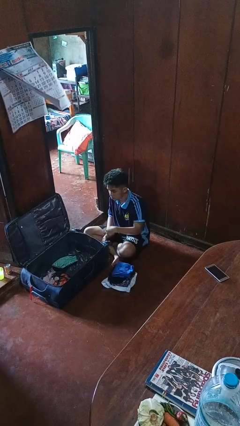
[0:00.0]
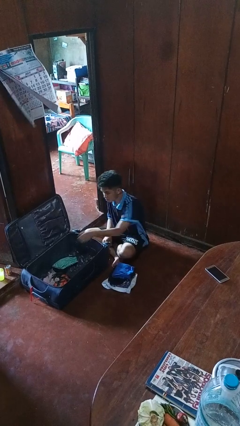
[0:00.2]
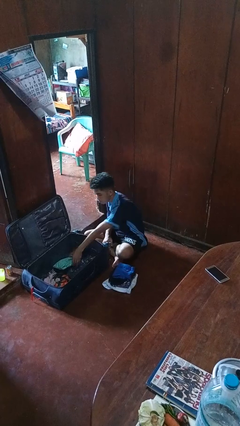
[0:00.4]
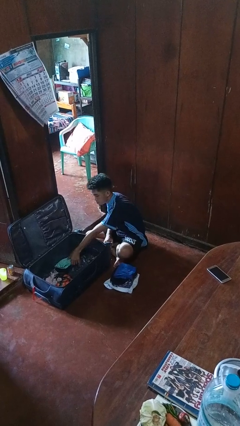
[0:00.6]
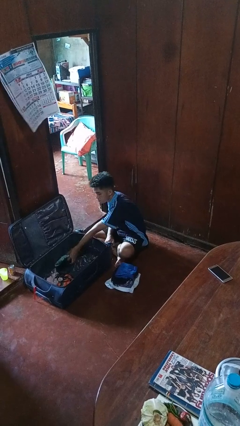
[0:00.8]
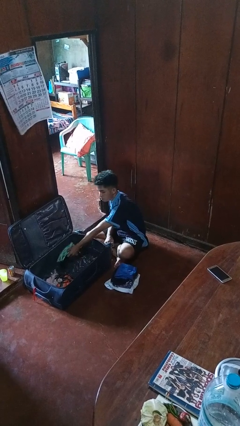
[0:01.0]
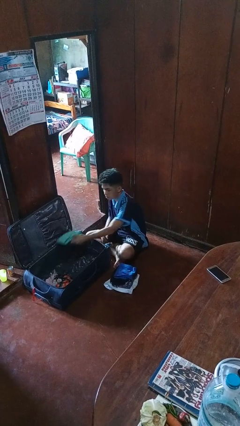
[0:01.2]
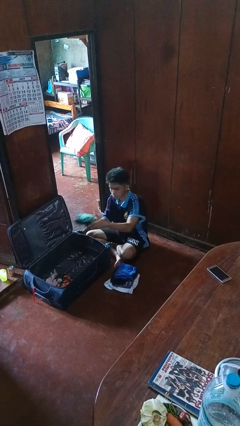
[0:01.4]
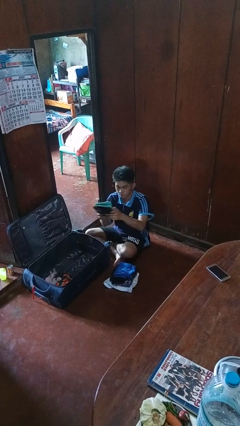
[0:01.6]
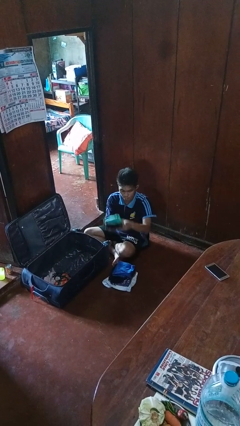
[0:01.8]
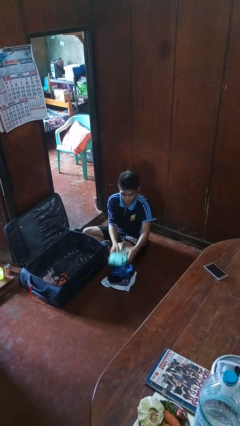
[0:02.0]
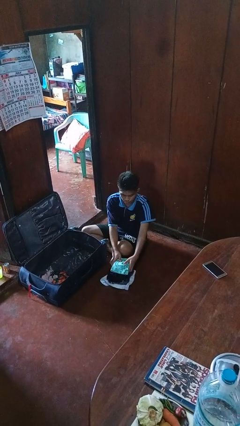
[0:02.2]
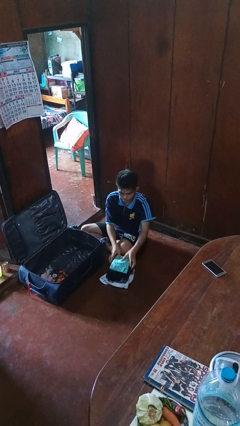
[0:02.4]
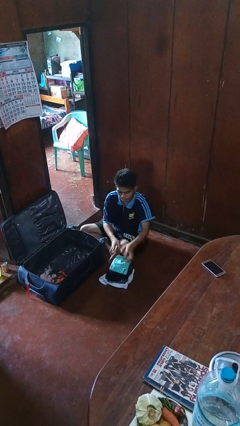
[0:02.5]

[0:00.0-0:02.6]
person unloads clothes from suitcase

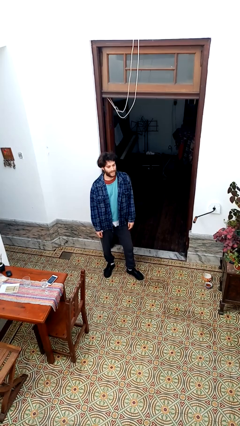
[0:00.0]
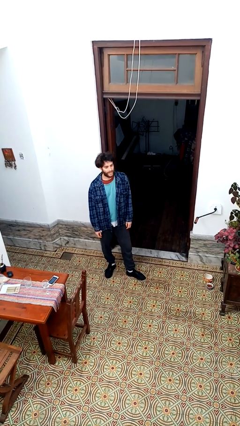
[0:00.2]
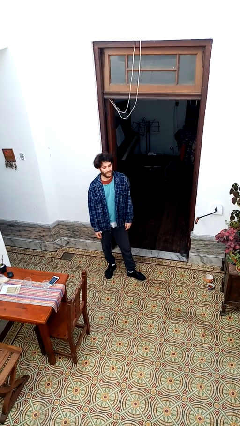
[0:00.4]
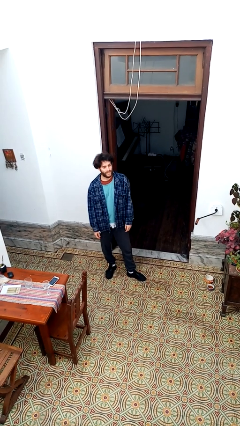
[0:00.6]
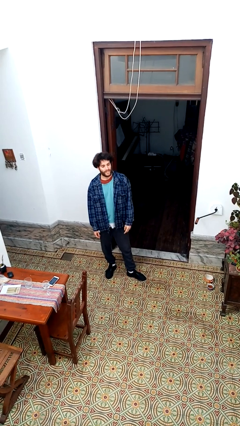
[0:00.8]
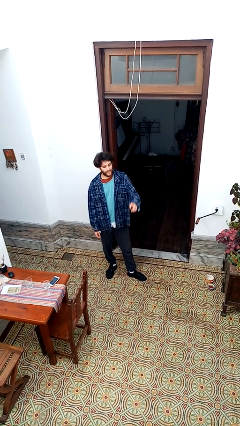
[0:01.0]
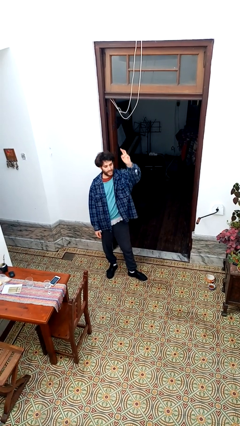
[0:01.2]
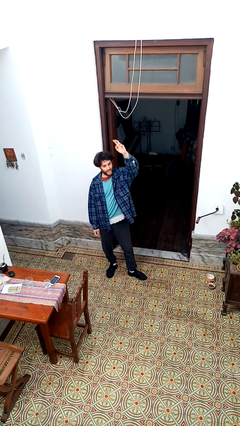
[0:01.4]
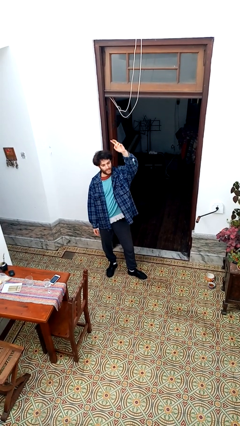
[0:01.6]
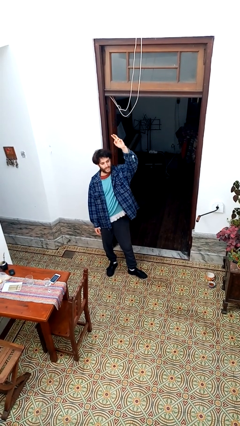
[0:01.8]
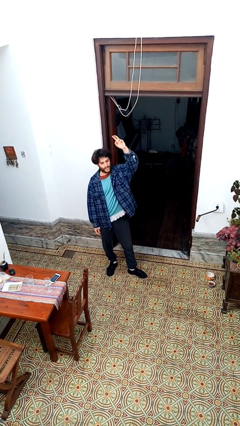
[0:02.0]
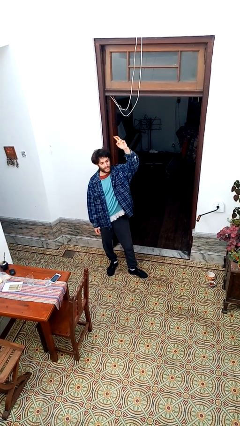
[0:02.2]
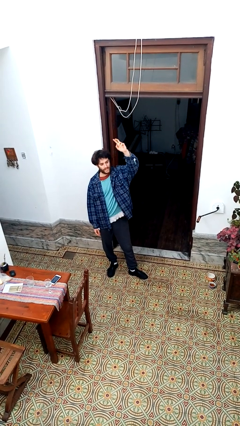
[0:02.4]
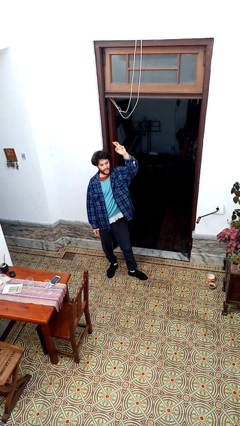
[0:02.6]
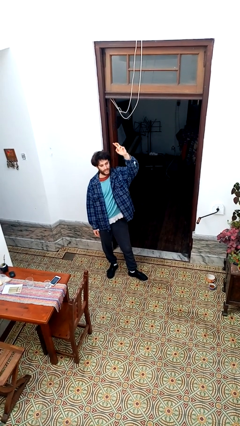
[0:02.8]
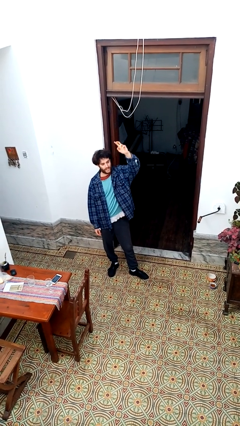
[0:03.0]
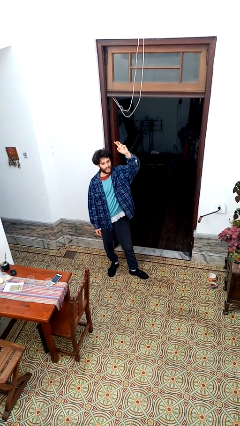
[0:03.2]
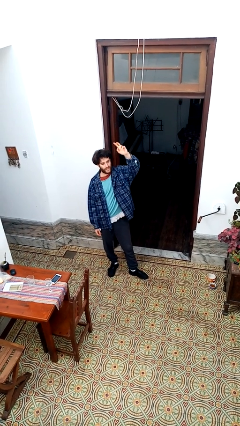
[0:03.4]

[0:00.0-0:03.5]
person gestures raise hand

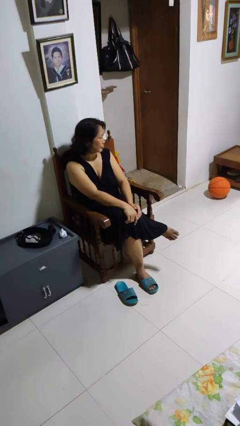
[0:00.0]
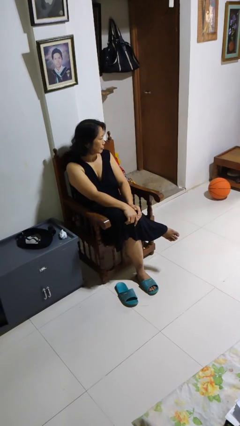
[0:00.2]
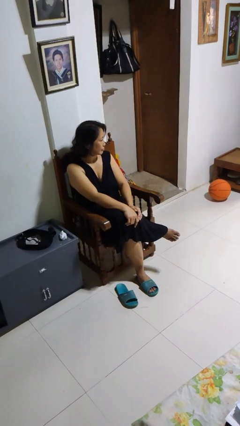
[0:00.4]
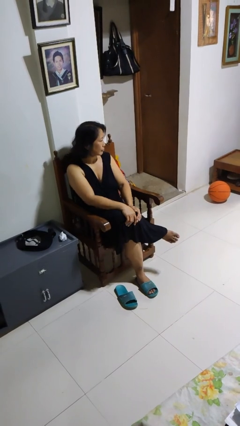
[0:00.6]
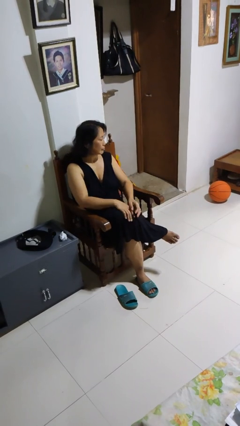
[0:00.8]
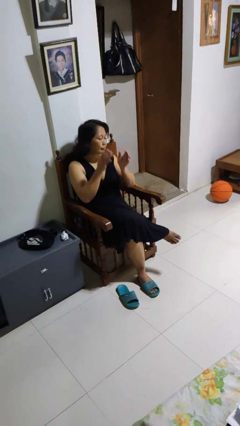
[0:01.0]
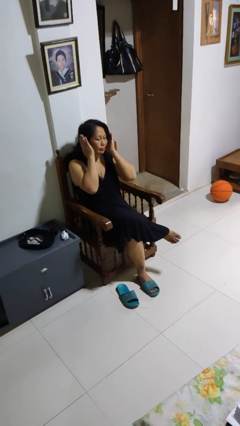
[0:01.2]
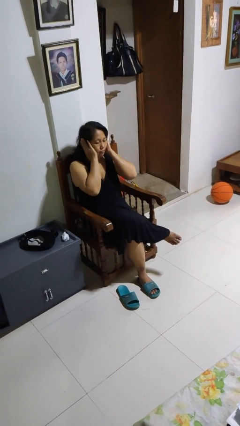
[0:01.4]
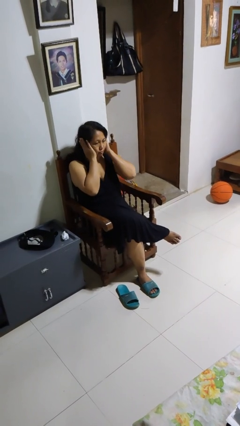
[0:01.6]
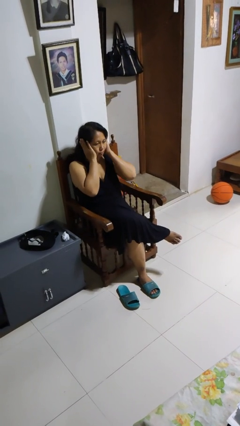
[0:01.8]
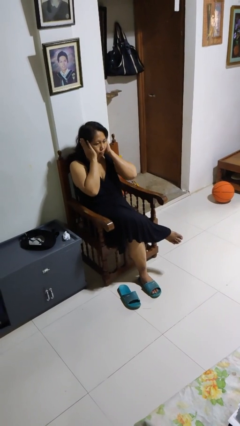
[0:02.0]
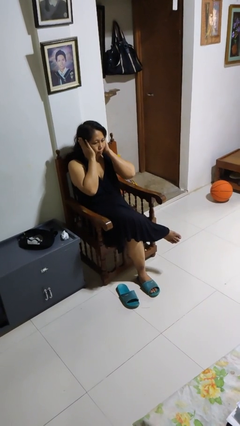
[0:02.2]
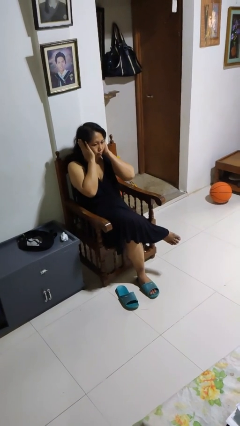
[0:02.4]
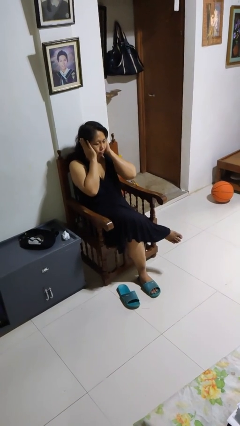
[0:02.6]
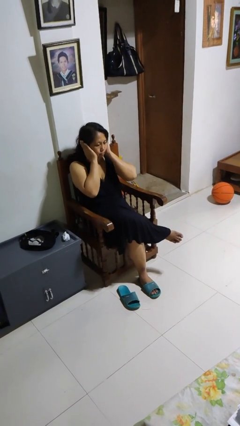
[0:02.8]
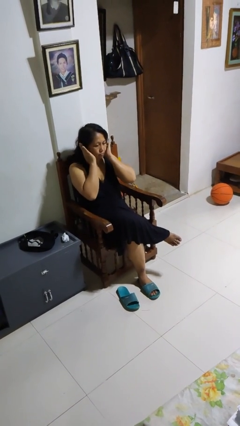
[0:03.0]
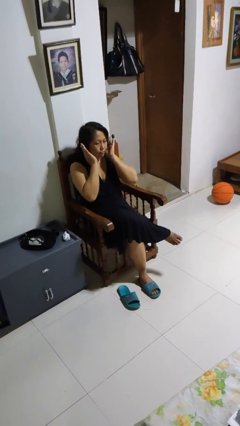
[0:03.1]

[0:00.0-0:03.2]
person puts fingers in ear

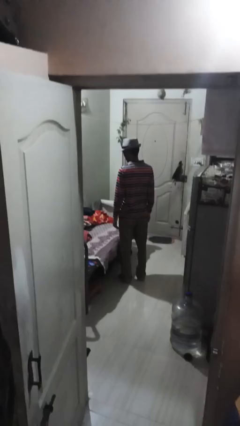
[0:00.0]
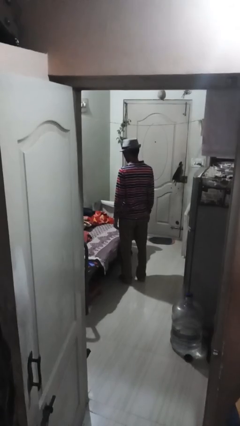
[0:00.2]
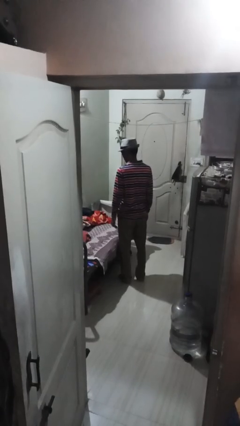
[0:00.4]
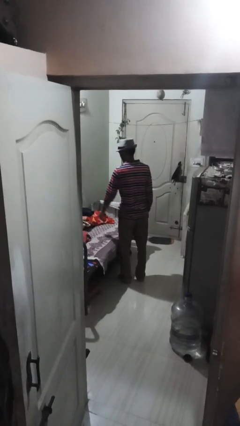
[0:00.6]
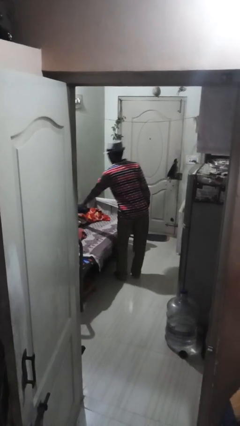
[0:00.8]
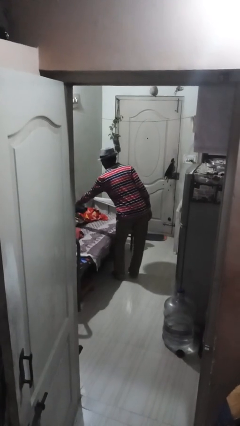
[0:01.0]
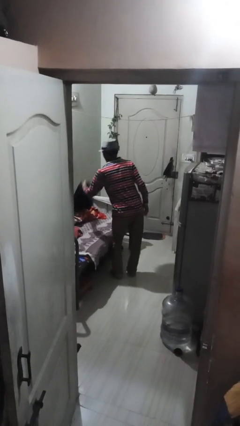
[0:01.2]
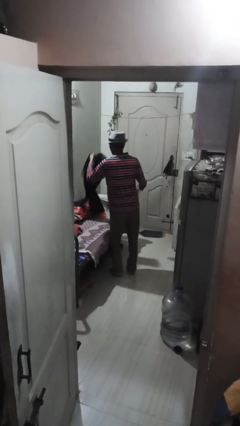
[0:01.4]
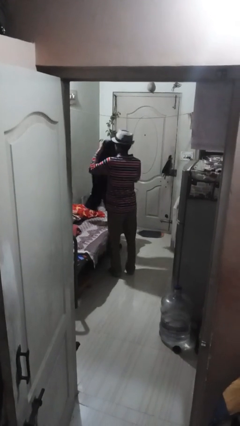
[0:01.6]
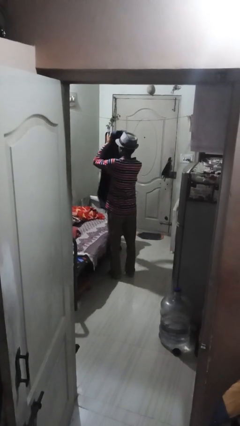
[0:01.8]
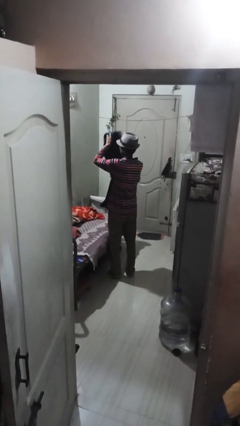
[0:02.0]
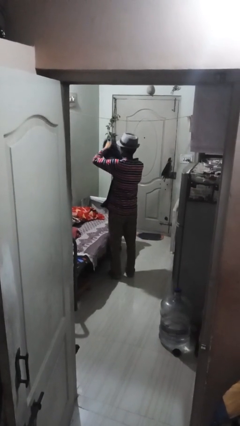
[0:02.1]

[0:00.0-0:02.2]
person folds pants

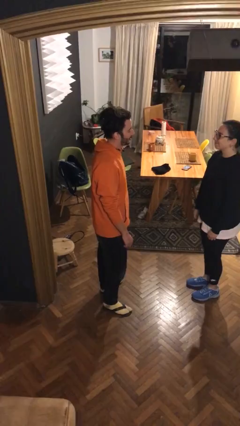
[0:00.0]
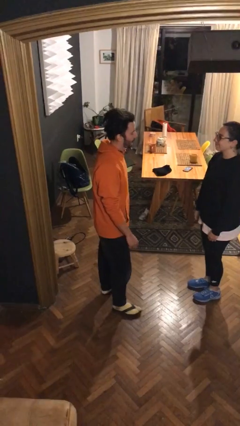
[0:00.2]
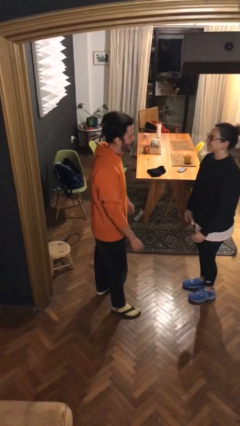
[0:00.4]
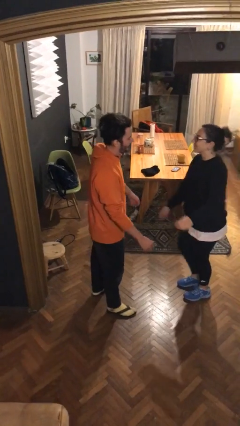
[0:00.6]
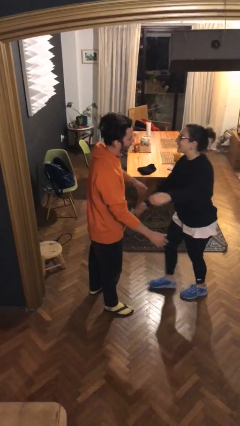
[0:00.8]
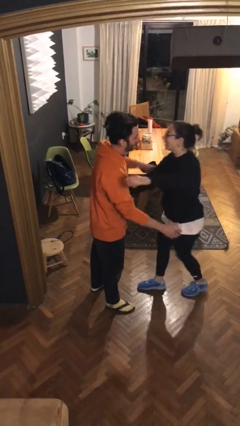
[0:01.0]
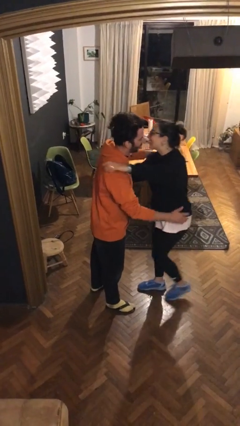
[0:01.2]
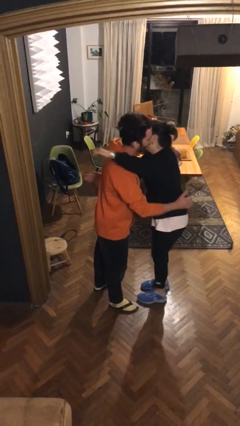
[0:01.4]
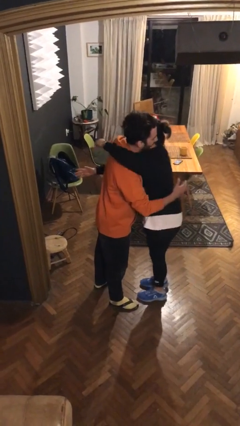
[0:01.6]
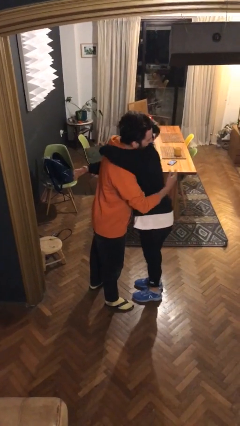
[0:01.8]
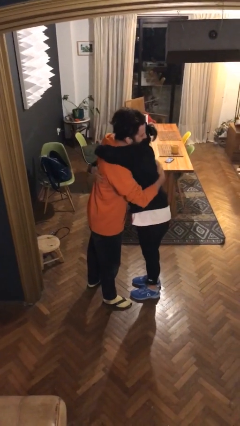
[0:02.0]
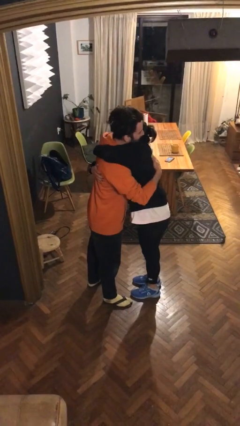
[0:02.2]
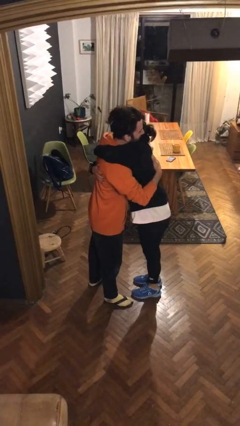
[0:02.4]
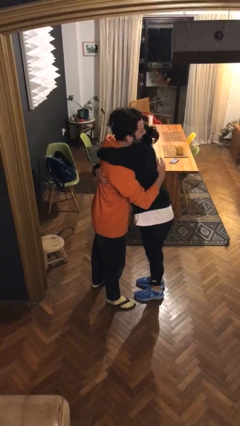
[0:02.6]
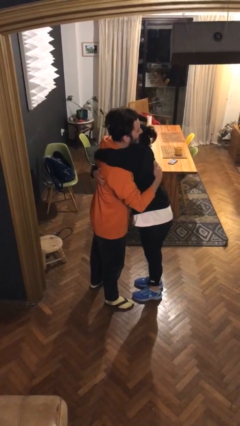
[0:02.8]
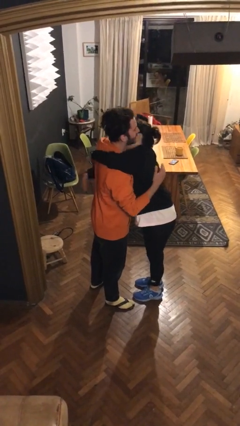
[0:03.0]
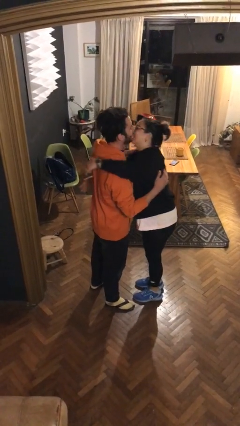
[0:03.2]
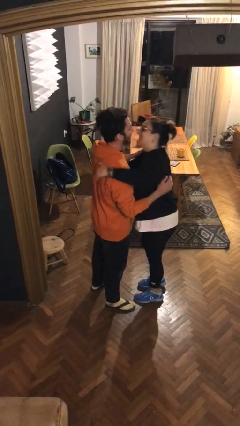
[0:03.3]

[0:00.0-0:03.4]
person embraces person

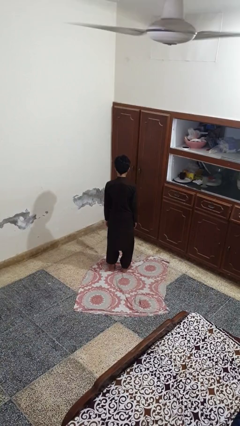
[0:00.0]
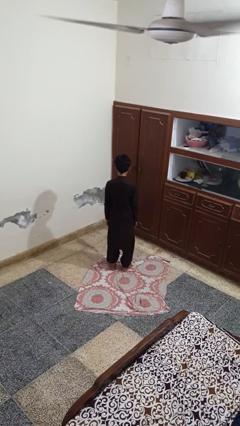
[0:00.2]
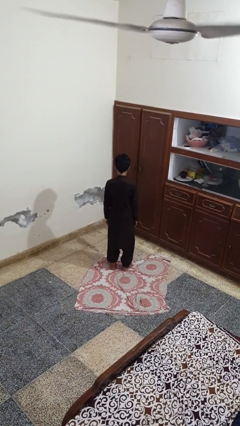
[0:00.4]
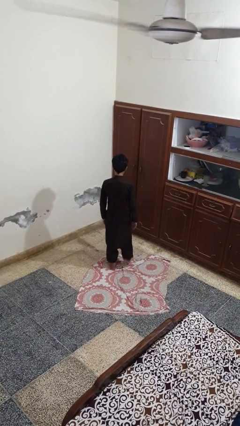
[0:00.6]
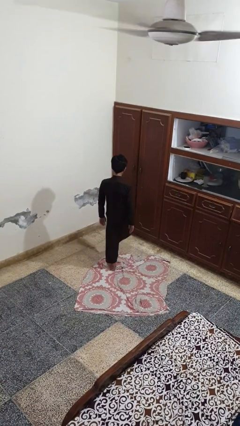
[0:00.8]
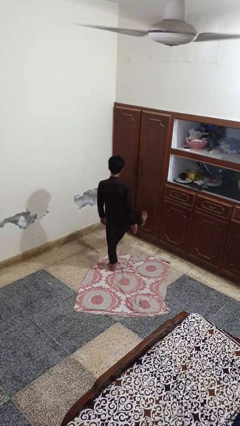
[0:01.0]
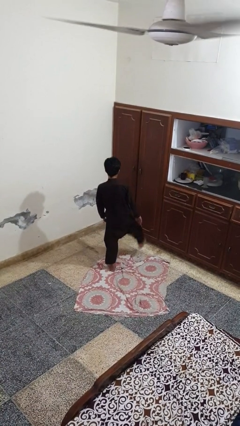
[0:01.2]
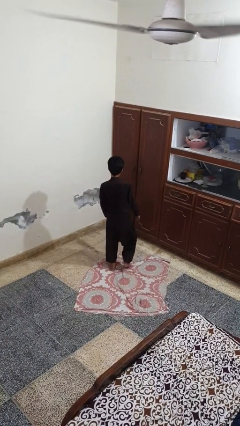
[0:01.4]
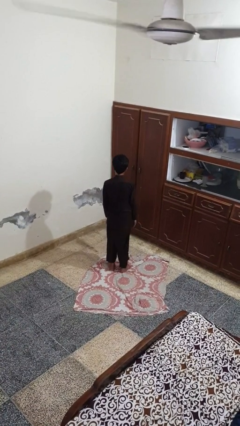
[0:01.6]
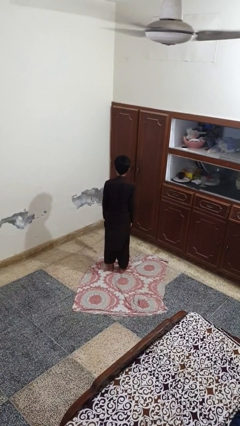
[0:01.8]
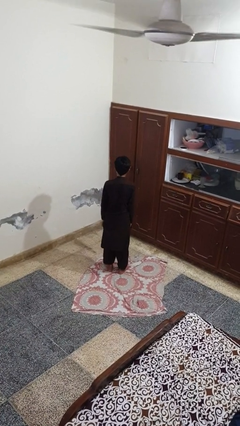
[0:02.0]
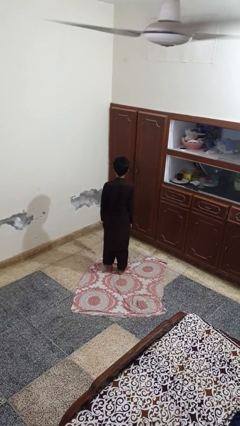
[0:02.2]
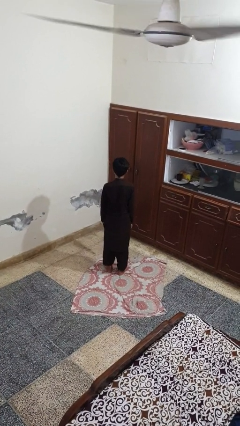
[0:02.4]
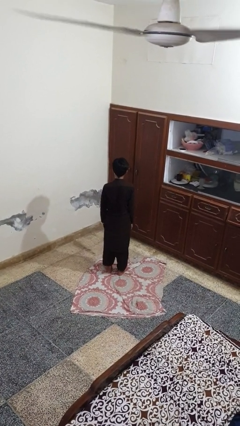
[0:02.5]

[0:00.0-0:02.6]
person karate kicks

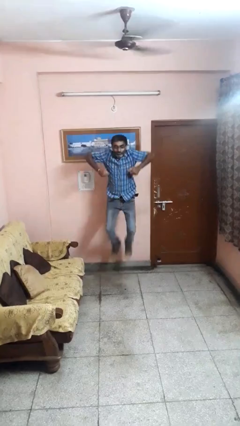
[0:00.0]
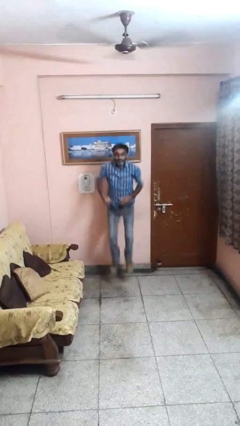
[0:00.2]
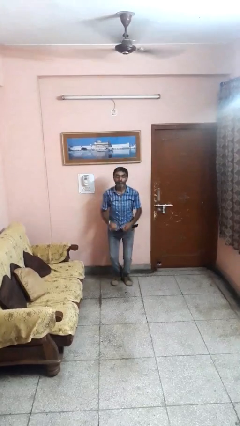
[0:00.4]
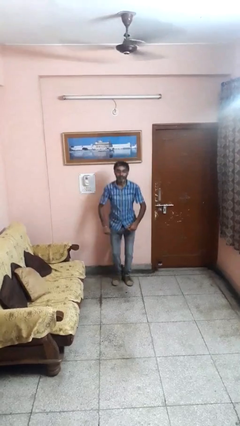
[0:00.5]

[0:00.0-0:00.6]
person jumps
